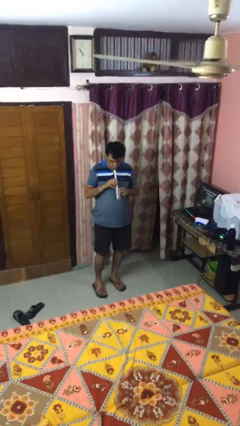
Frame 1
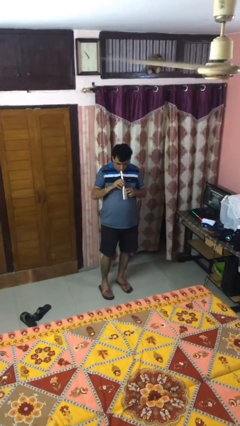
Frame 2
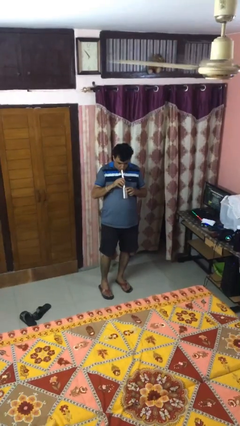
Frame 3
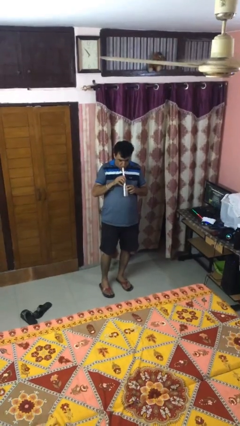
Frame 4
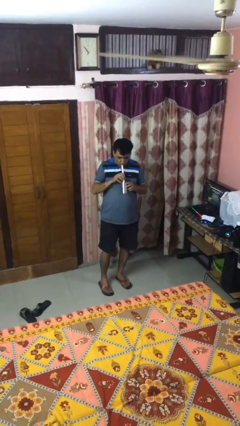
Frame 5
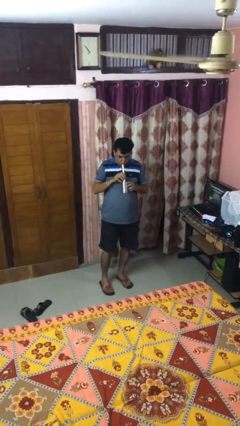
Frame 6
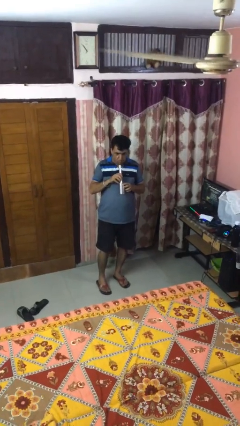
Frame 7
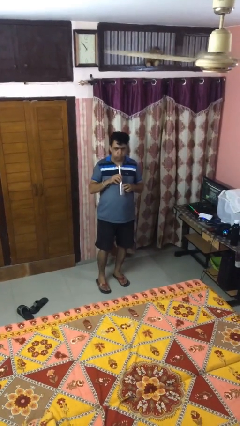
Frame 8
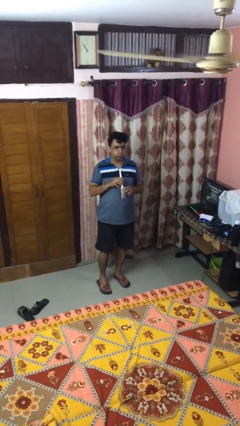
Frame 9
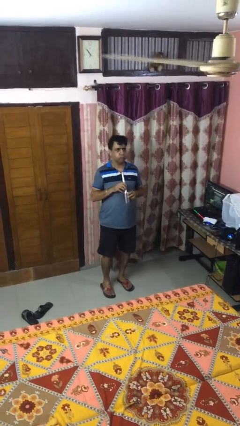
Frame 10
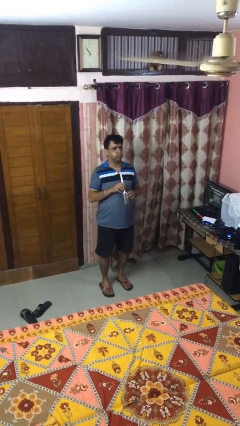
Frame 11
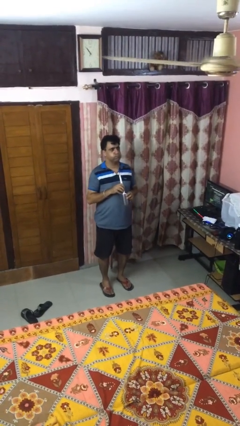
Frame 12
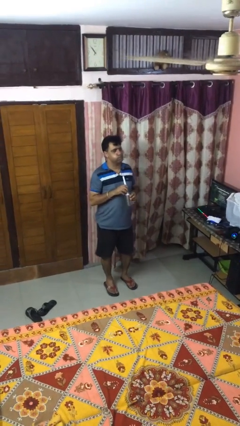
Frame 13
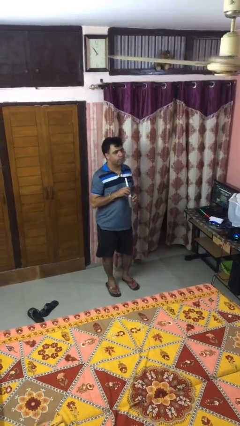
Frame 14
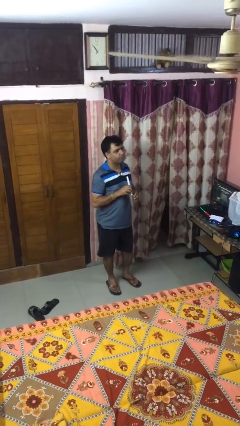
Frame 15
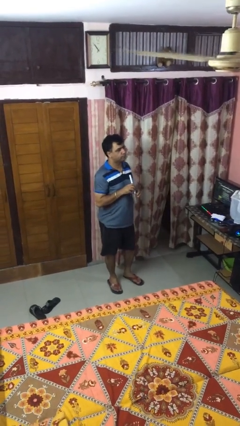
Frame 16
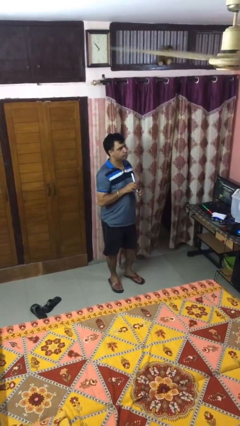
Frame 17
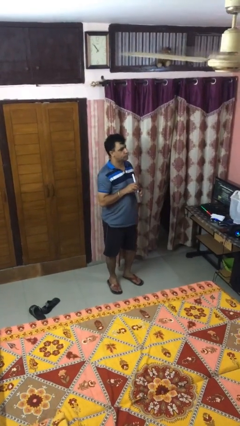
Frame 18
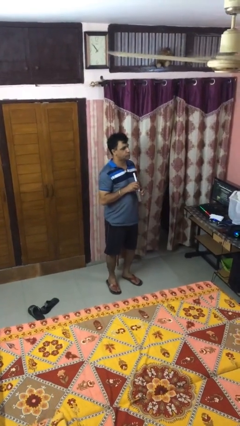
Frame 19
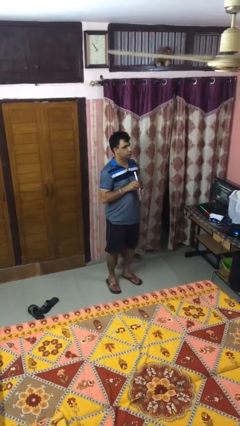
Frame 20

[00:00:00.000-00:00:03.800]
person drinks from straw

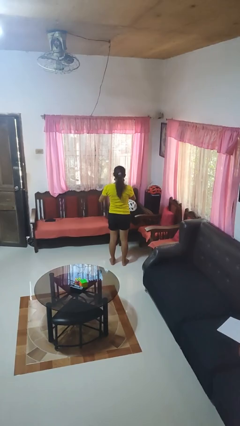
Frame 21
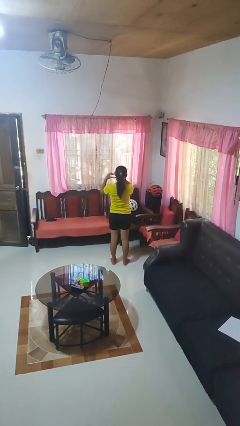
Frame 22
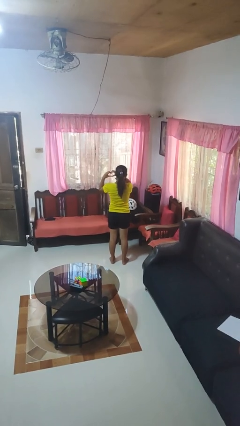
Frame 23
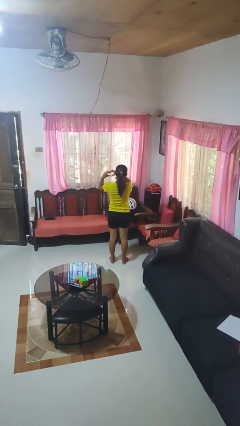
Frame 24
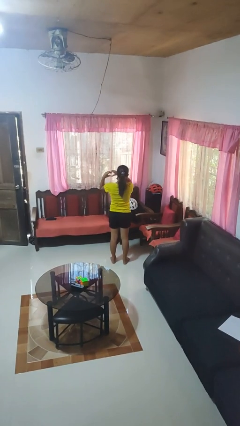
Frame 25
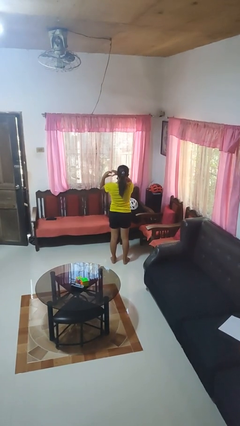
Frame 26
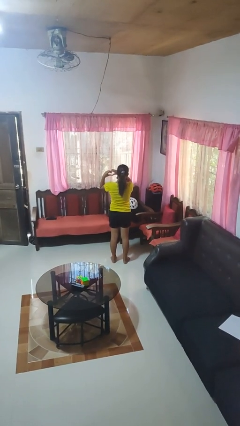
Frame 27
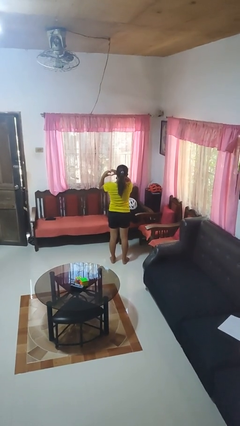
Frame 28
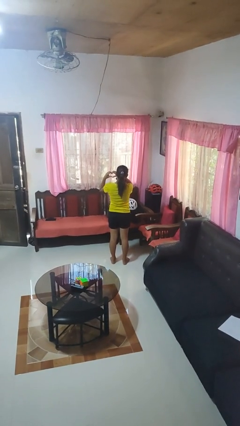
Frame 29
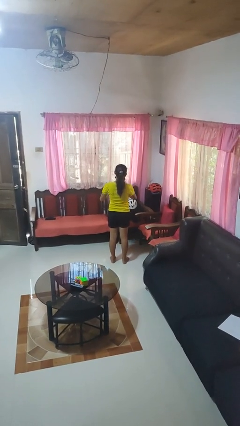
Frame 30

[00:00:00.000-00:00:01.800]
person gestures heart

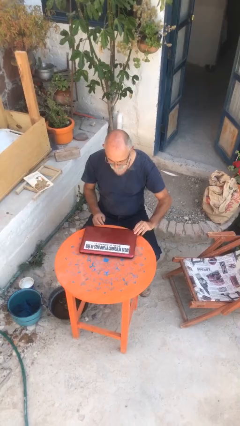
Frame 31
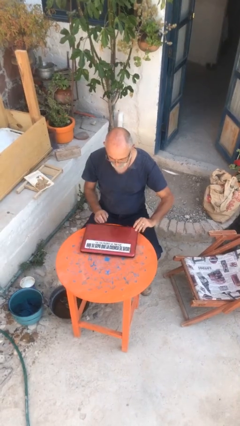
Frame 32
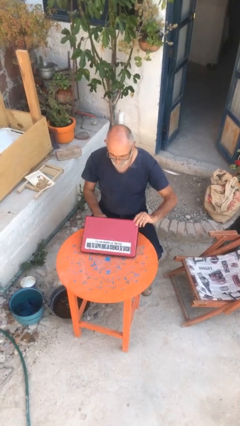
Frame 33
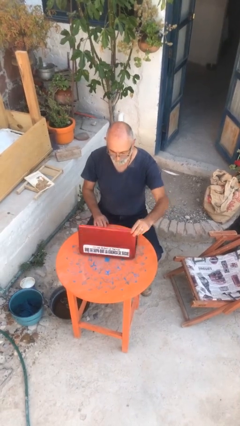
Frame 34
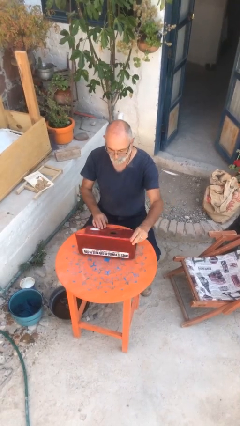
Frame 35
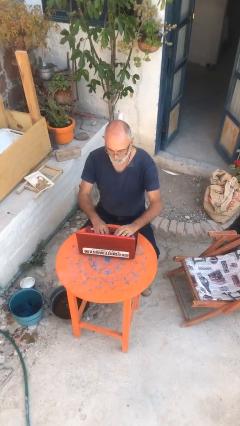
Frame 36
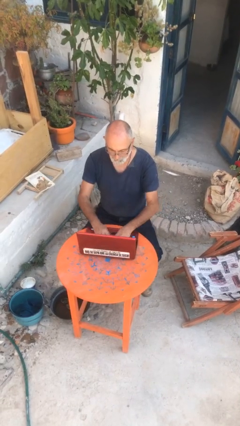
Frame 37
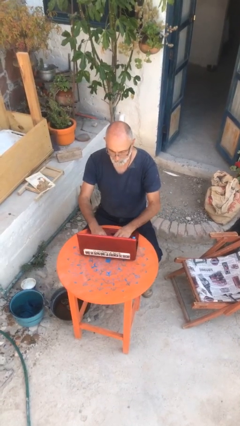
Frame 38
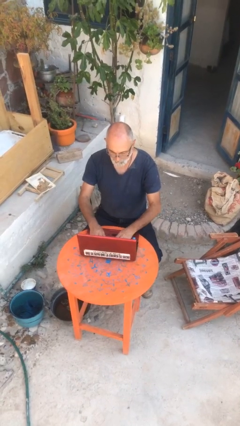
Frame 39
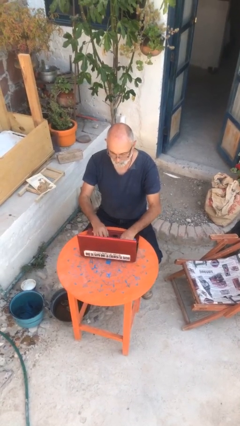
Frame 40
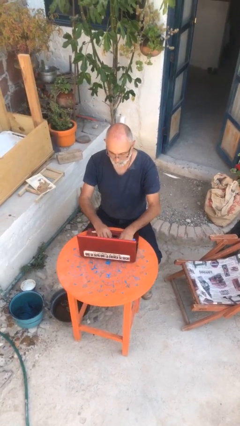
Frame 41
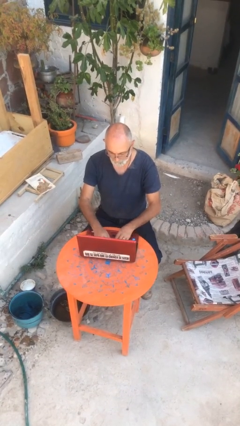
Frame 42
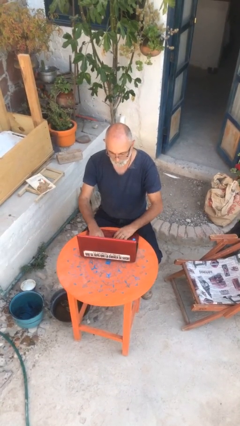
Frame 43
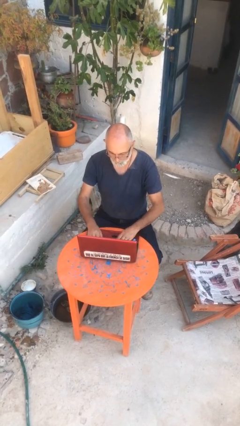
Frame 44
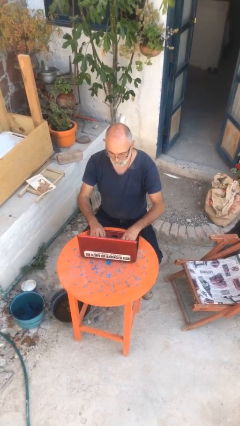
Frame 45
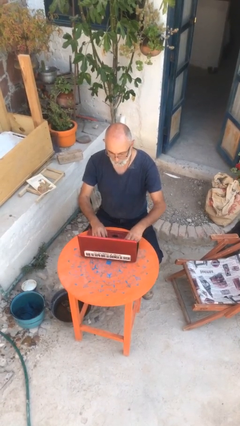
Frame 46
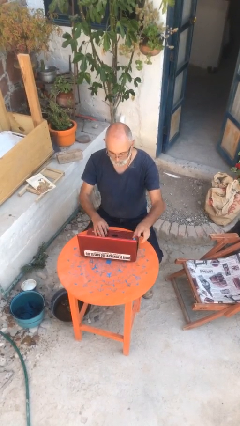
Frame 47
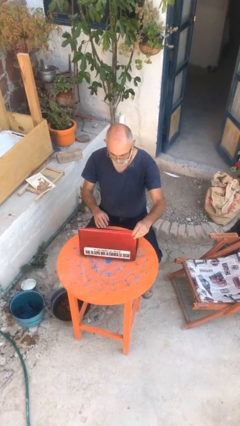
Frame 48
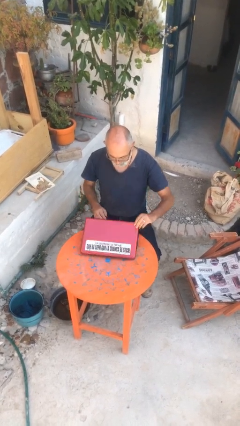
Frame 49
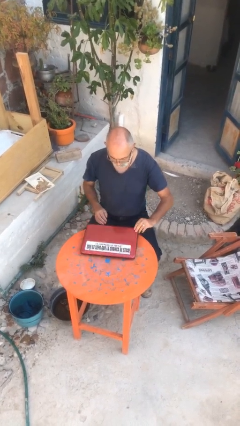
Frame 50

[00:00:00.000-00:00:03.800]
person interacts with laptop

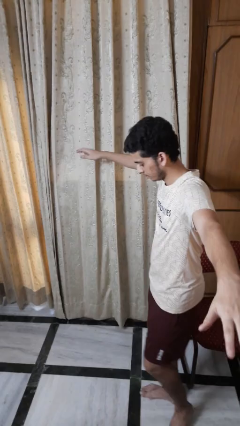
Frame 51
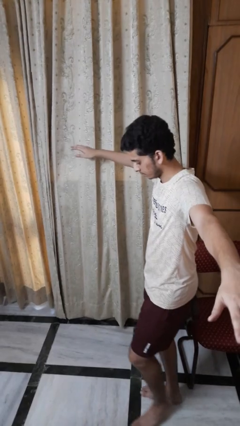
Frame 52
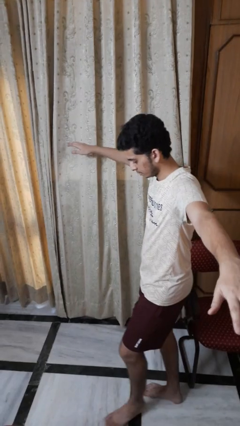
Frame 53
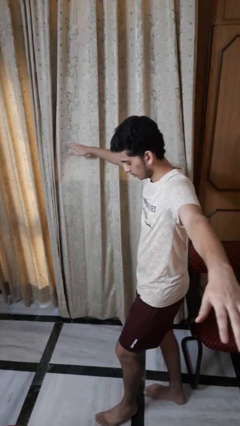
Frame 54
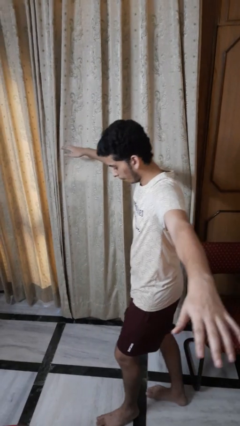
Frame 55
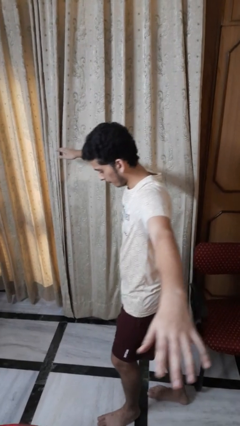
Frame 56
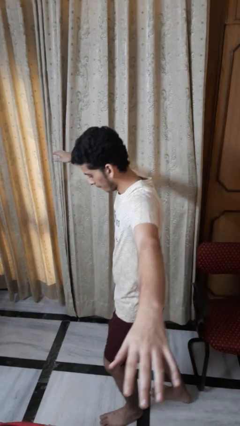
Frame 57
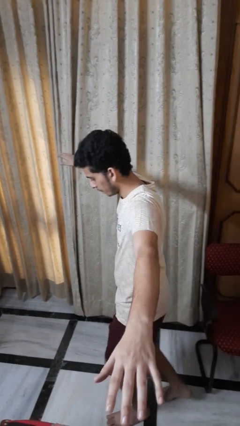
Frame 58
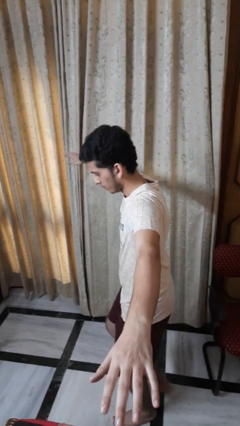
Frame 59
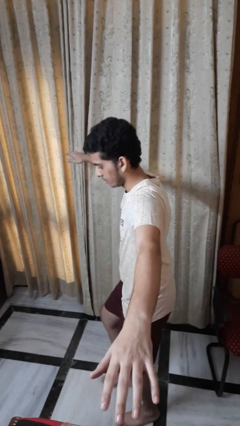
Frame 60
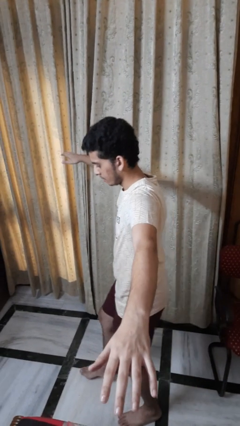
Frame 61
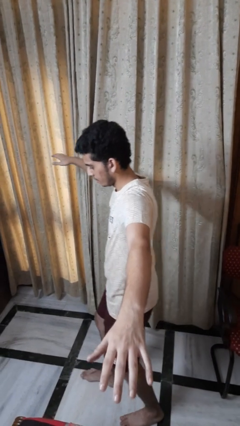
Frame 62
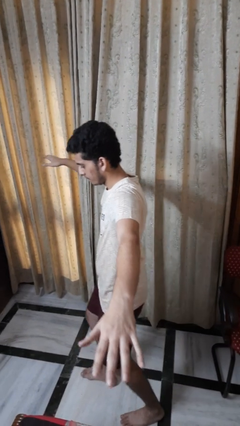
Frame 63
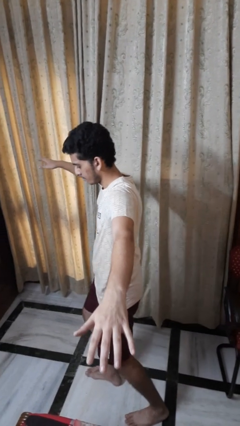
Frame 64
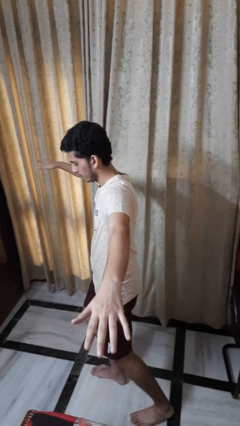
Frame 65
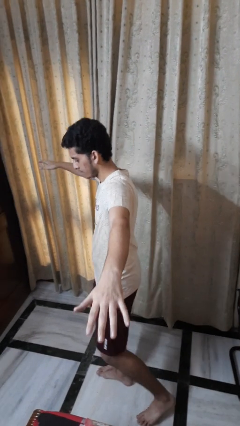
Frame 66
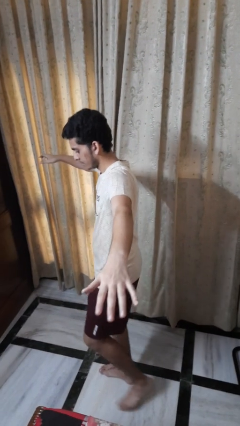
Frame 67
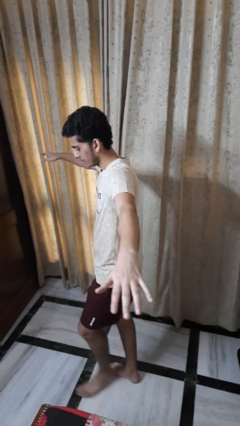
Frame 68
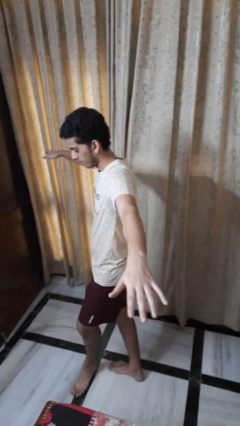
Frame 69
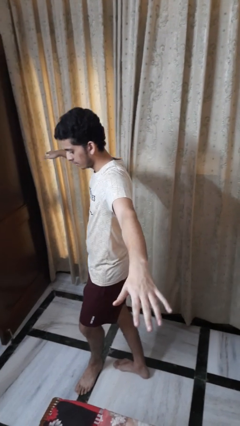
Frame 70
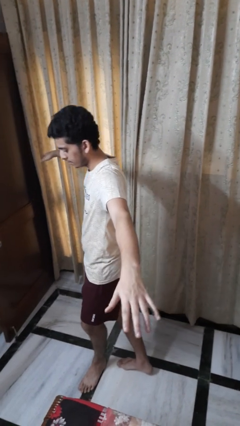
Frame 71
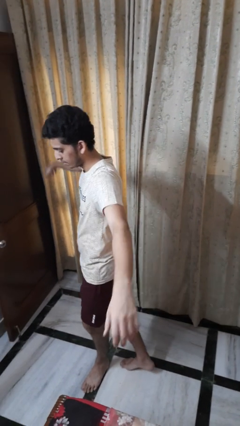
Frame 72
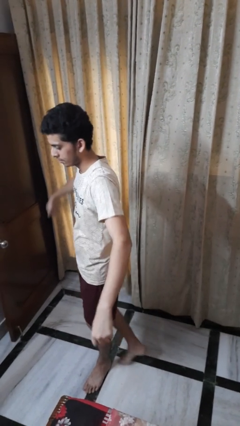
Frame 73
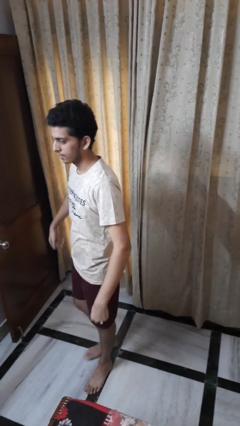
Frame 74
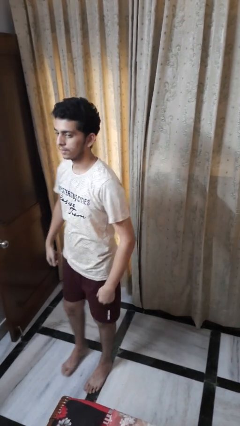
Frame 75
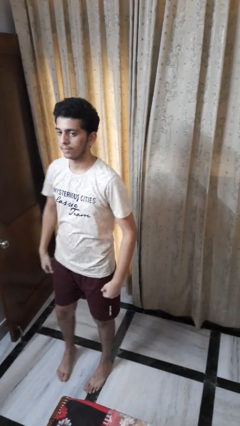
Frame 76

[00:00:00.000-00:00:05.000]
person walks tiptoe

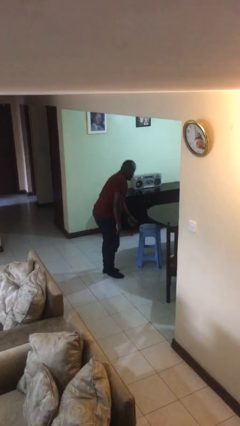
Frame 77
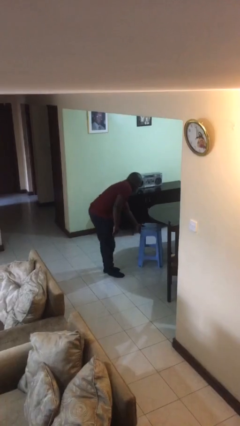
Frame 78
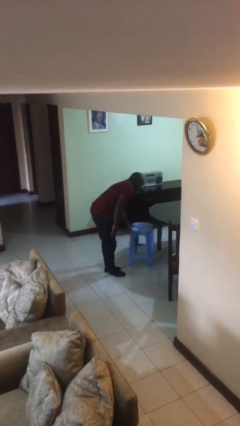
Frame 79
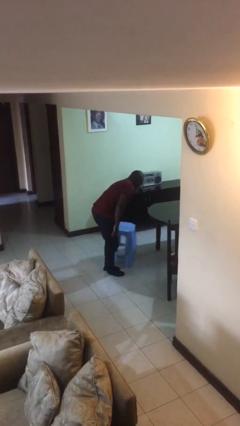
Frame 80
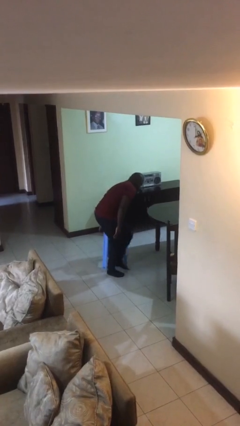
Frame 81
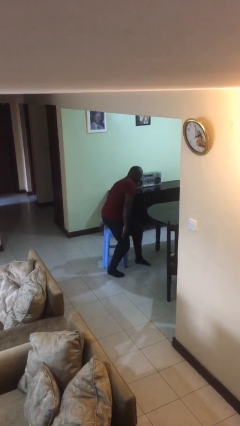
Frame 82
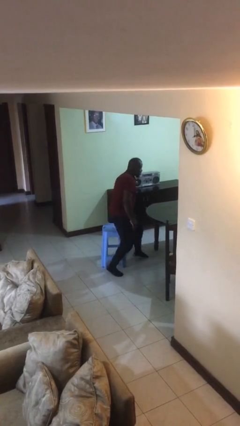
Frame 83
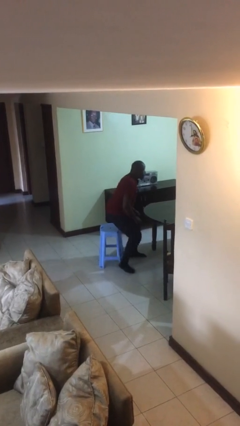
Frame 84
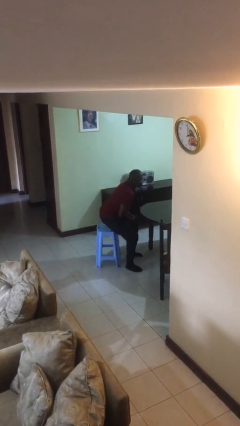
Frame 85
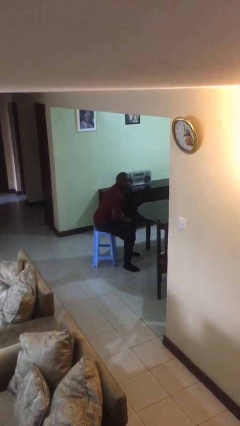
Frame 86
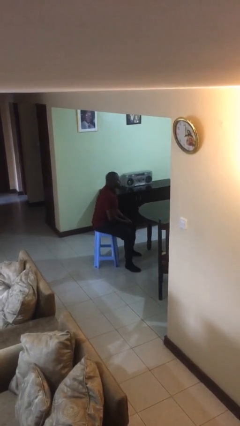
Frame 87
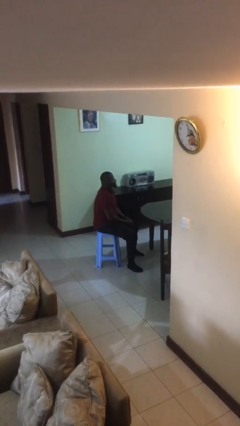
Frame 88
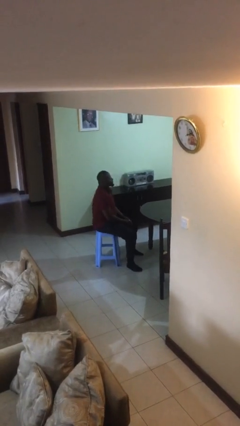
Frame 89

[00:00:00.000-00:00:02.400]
person sits down

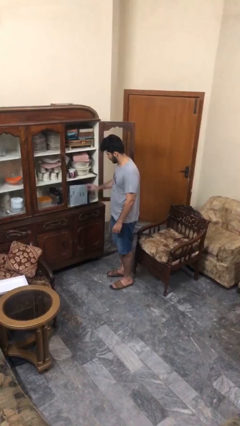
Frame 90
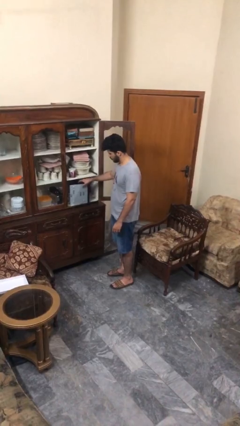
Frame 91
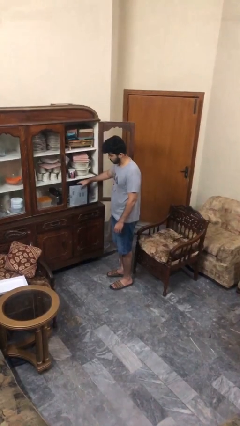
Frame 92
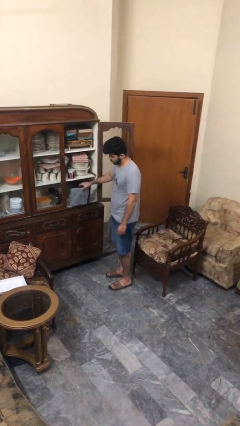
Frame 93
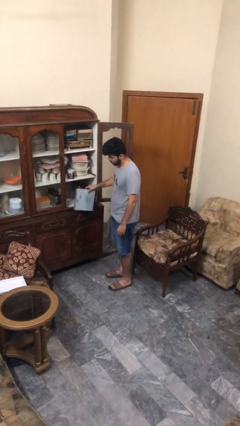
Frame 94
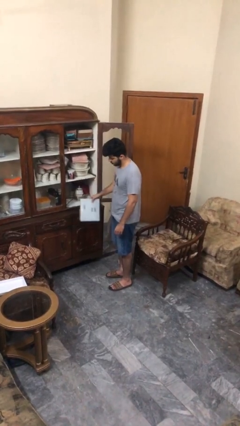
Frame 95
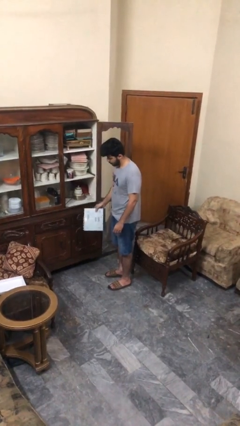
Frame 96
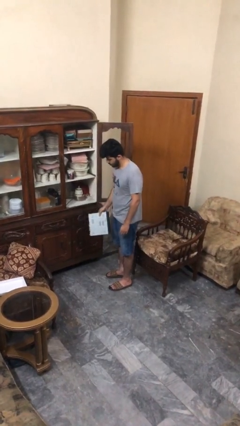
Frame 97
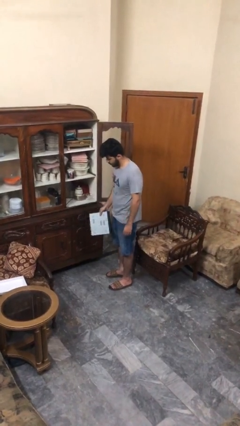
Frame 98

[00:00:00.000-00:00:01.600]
person picks up object from cabinet
